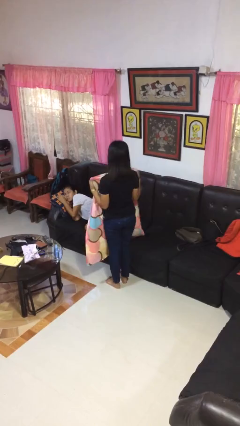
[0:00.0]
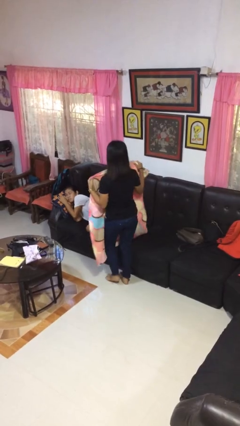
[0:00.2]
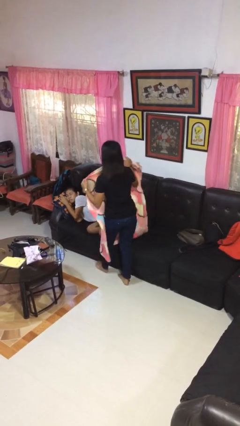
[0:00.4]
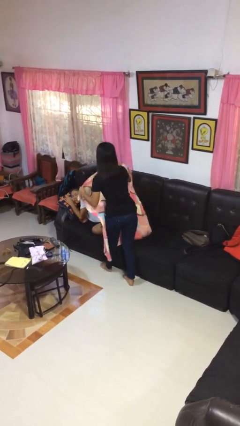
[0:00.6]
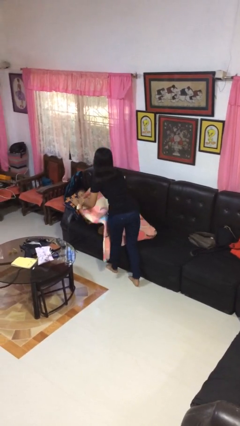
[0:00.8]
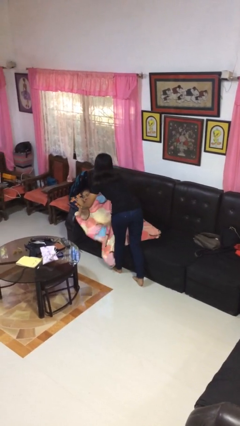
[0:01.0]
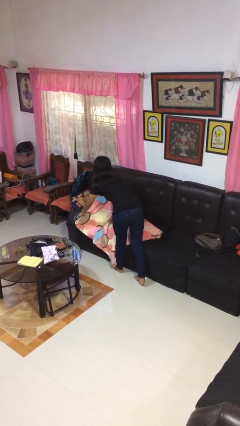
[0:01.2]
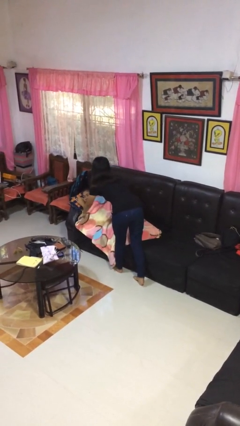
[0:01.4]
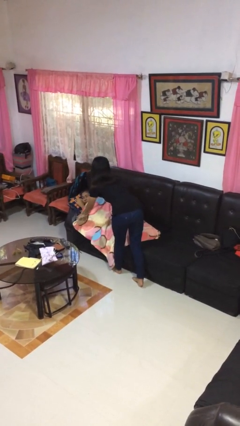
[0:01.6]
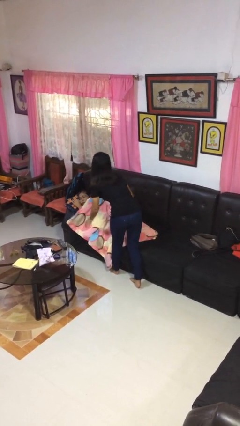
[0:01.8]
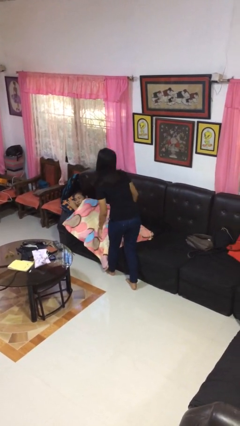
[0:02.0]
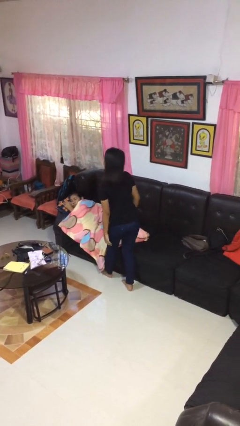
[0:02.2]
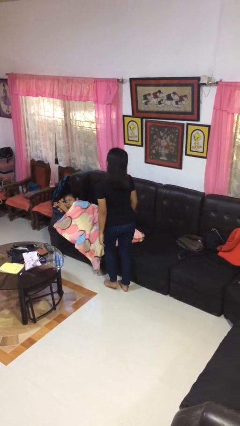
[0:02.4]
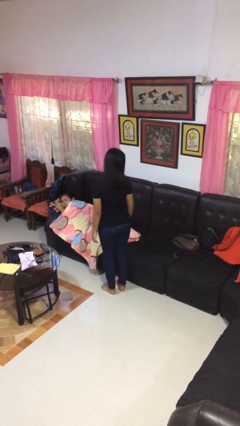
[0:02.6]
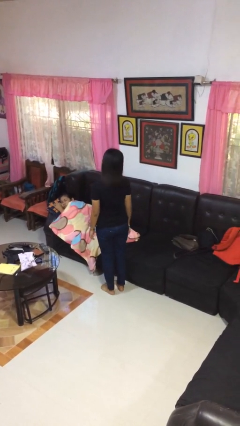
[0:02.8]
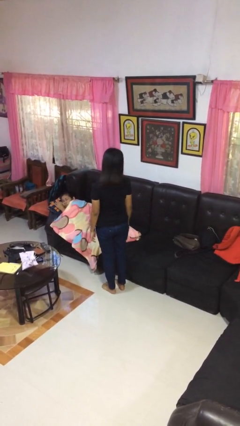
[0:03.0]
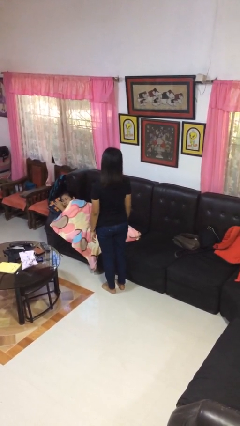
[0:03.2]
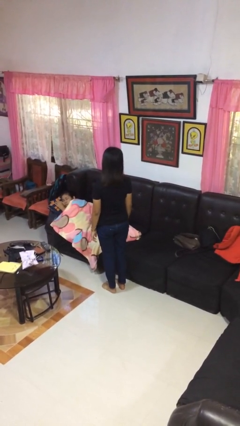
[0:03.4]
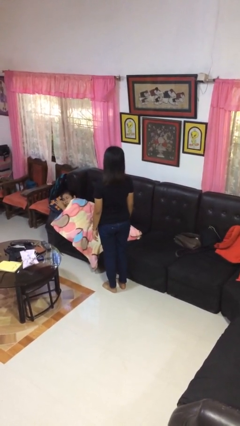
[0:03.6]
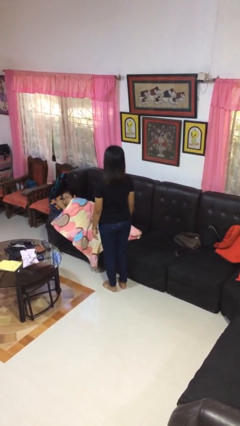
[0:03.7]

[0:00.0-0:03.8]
person covers friend with blanket

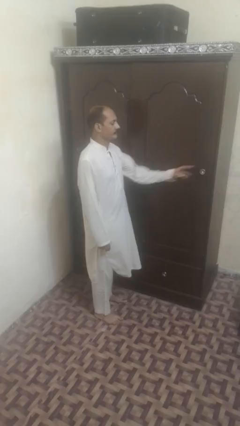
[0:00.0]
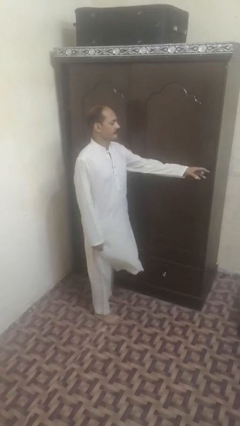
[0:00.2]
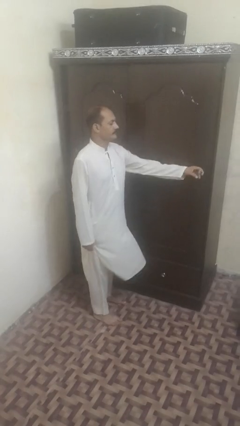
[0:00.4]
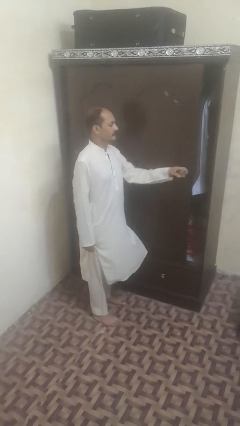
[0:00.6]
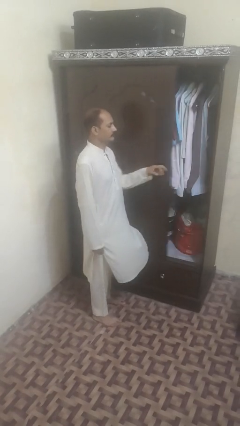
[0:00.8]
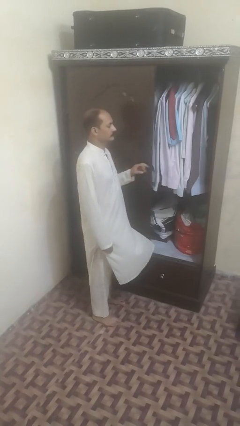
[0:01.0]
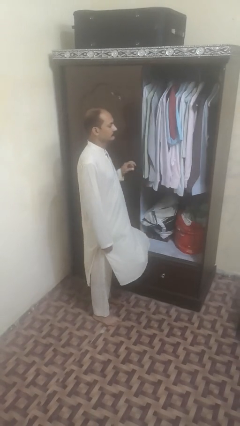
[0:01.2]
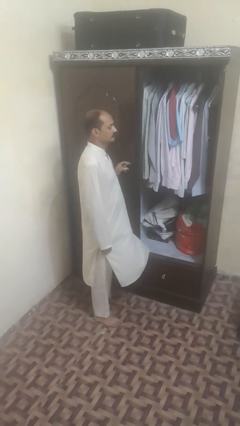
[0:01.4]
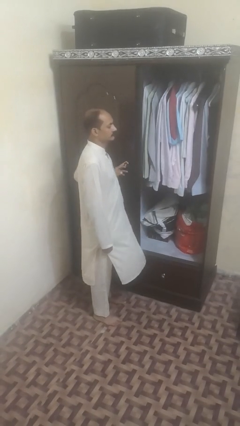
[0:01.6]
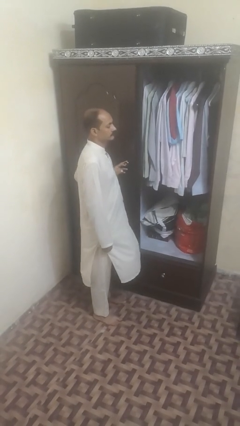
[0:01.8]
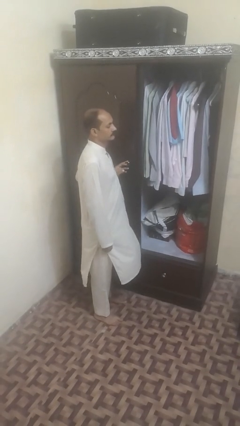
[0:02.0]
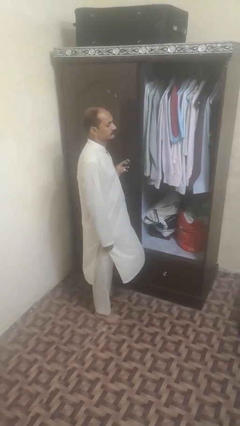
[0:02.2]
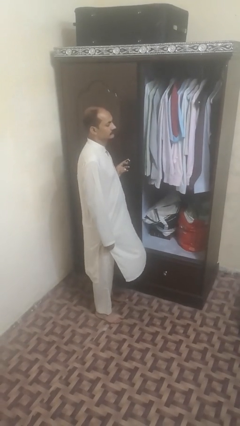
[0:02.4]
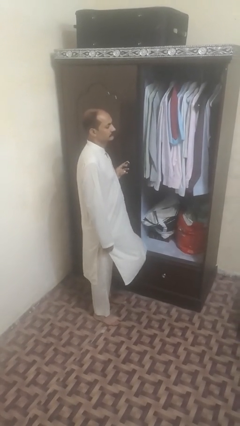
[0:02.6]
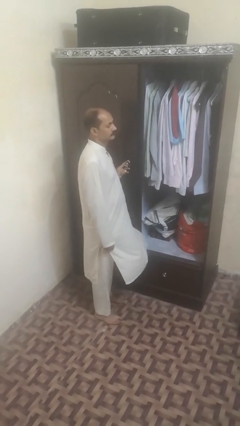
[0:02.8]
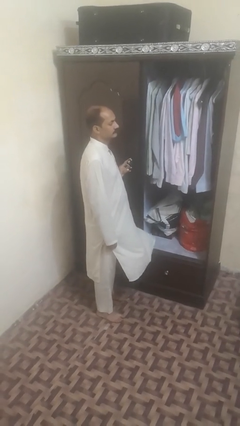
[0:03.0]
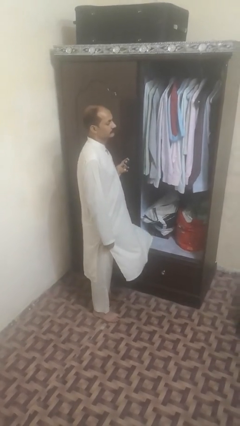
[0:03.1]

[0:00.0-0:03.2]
person opens sliding door

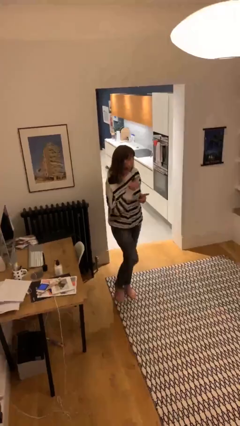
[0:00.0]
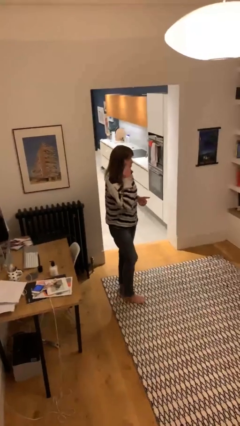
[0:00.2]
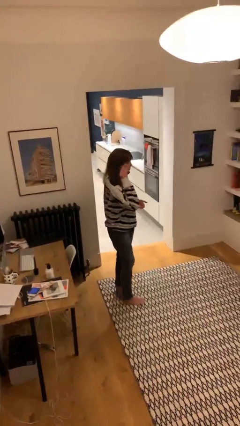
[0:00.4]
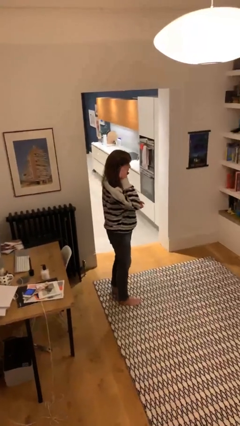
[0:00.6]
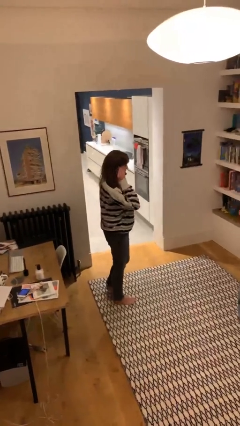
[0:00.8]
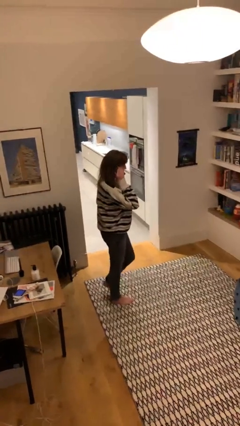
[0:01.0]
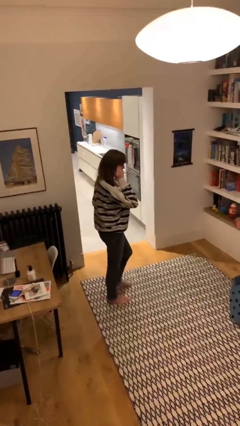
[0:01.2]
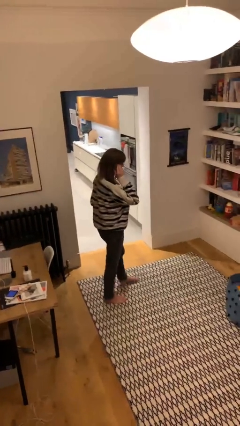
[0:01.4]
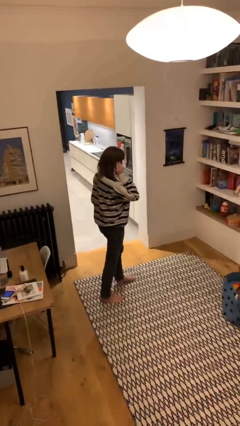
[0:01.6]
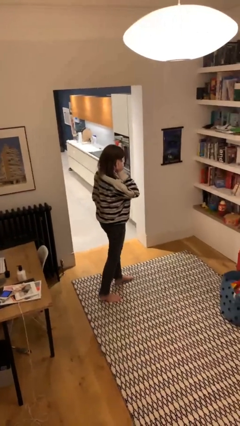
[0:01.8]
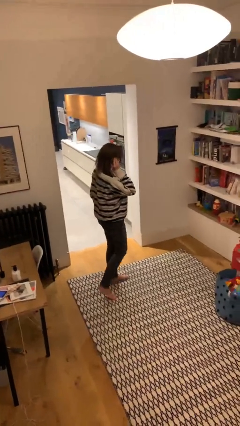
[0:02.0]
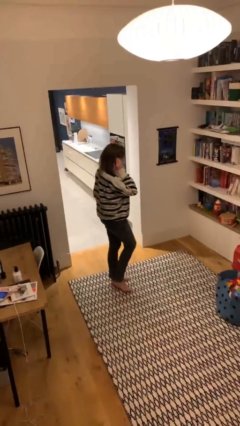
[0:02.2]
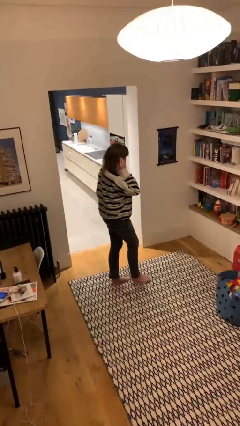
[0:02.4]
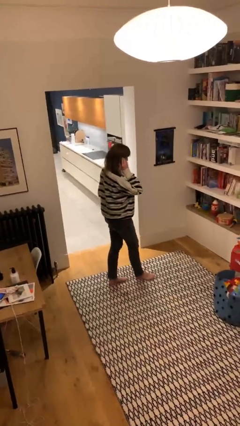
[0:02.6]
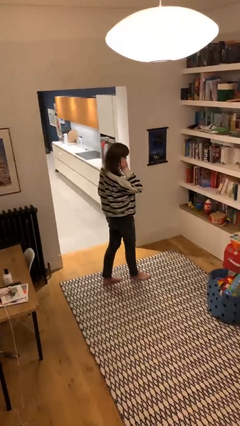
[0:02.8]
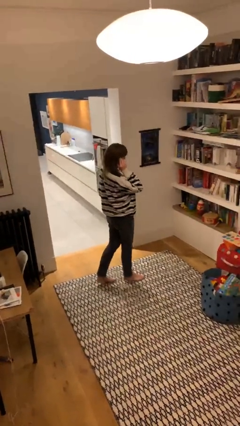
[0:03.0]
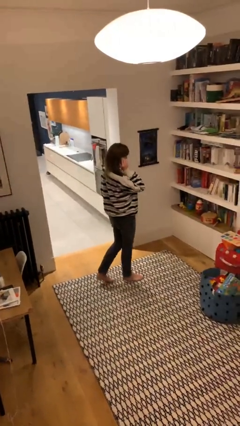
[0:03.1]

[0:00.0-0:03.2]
person talks on phone

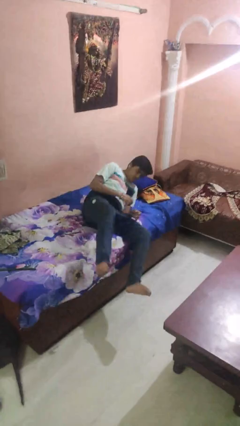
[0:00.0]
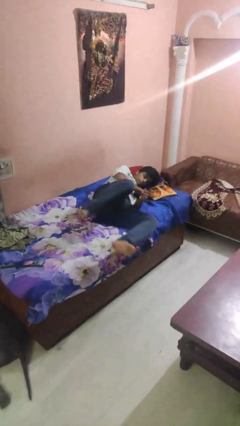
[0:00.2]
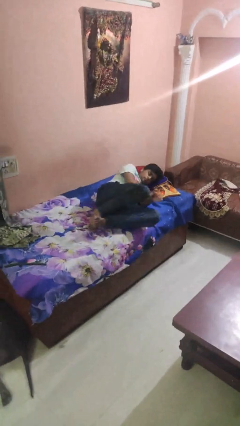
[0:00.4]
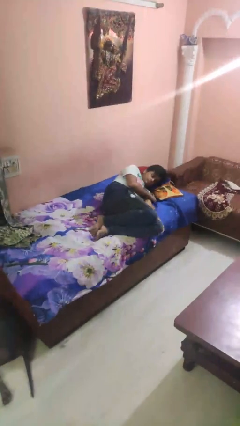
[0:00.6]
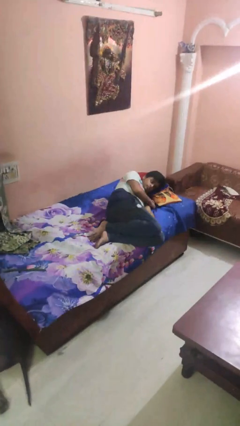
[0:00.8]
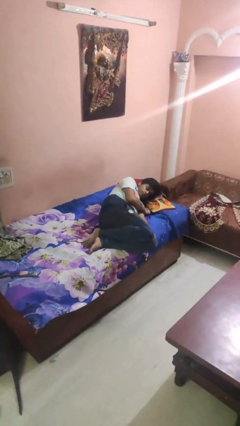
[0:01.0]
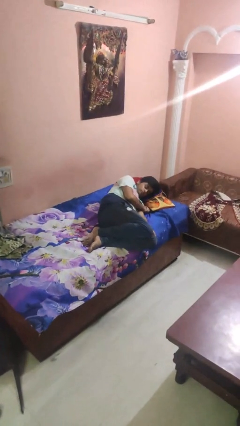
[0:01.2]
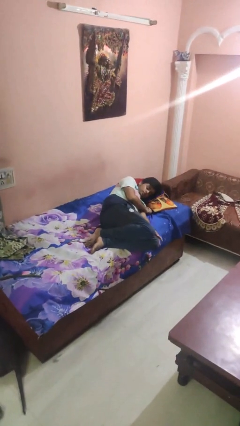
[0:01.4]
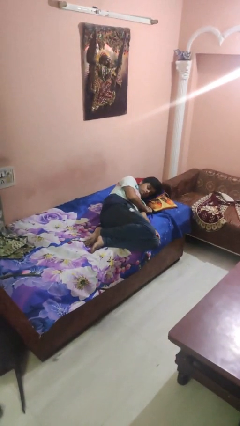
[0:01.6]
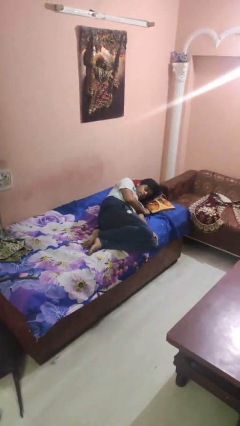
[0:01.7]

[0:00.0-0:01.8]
person lies down on bed

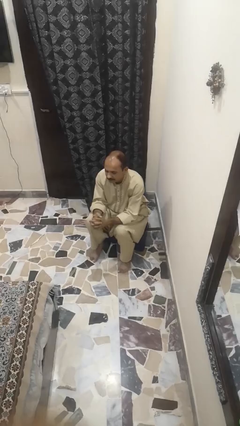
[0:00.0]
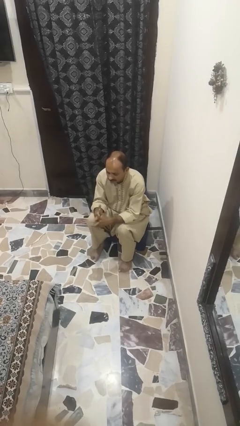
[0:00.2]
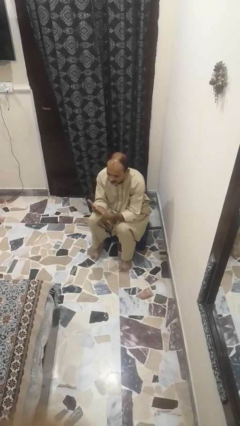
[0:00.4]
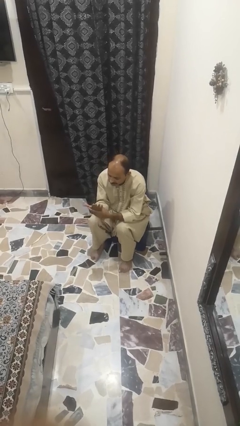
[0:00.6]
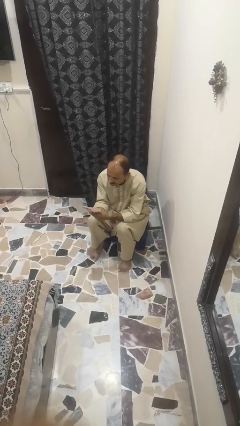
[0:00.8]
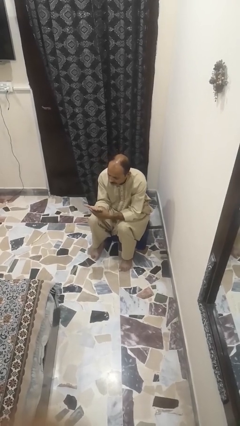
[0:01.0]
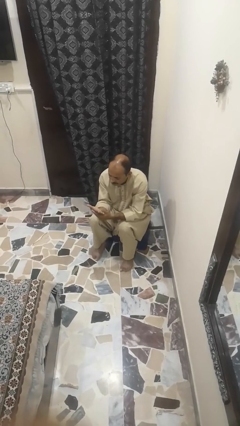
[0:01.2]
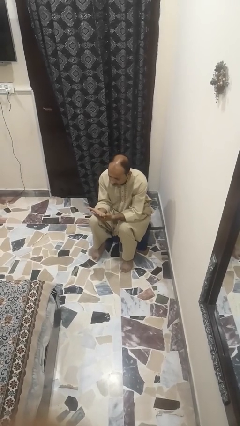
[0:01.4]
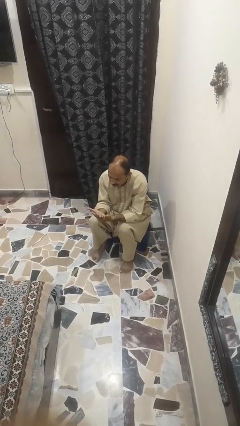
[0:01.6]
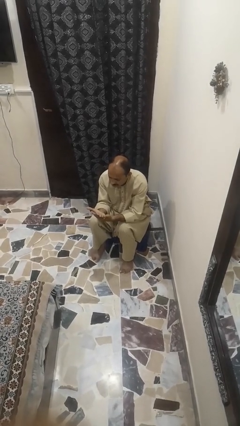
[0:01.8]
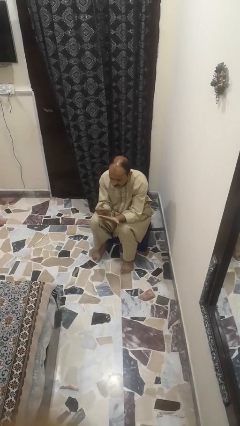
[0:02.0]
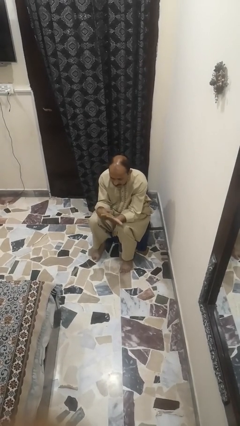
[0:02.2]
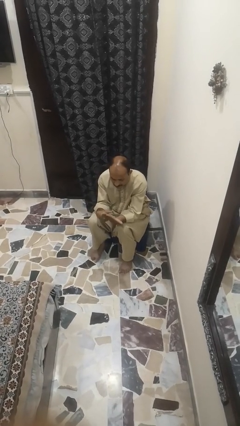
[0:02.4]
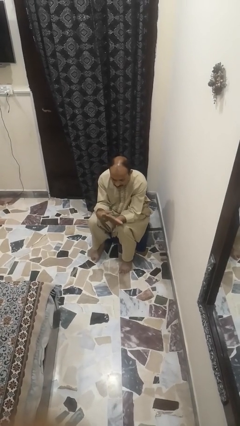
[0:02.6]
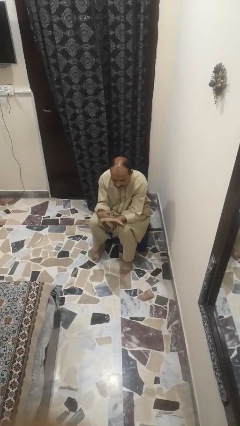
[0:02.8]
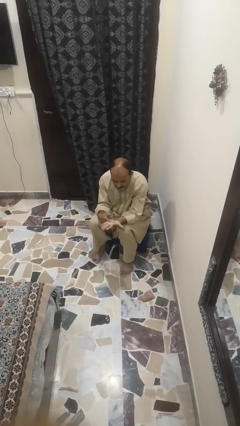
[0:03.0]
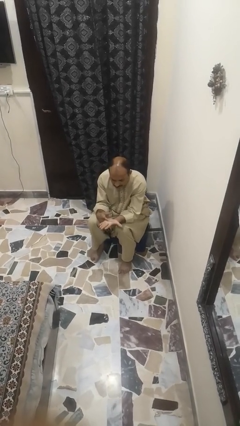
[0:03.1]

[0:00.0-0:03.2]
person looks at hands in lap

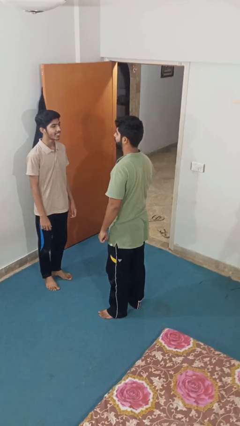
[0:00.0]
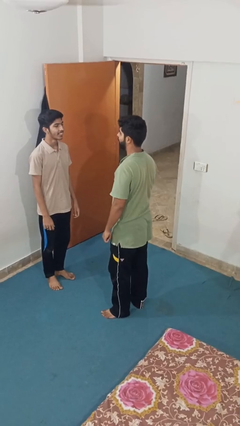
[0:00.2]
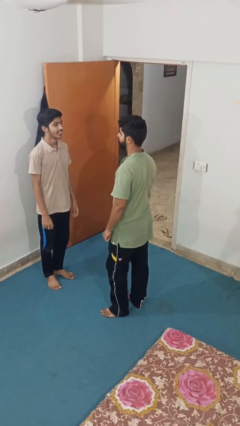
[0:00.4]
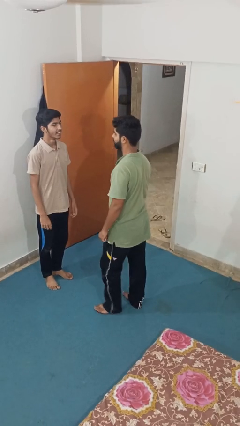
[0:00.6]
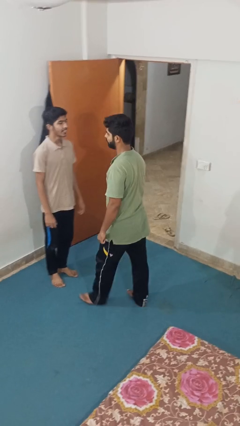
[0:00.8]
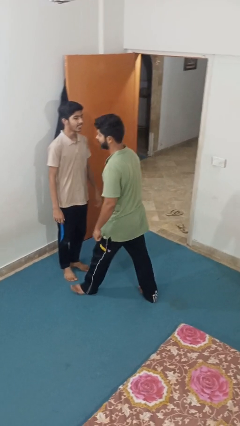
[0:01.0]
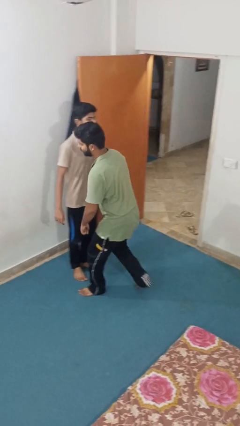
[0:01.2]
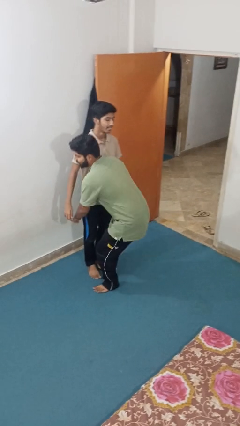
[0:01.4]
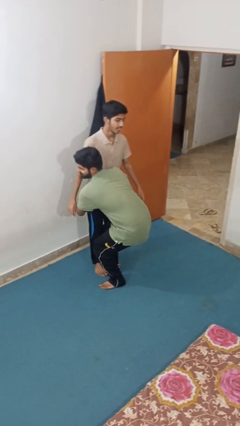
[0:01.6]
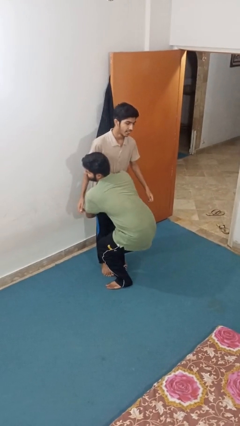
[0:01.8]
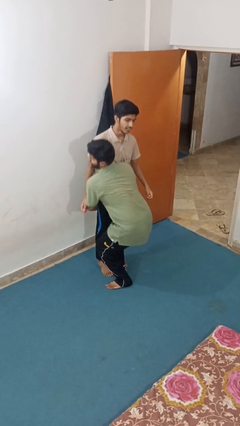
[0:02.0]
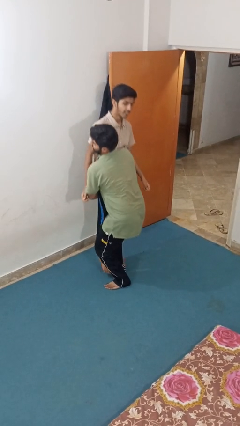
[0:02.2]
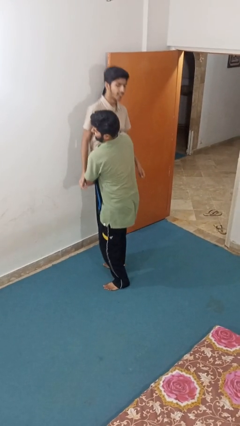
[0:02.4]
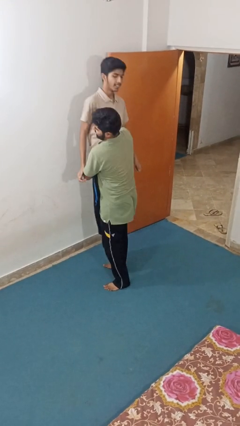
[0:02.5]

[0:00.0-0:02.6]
person picks up person
